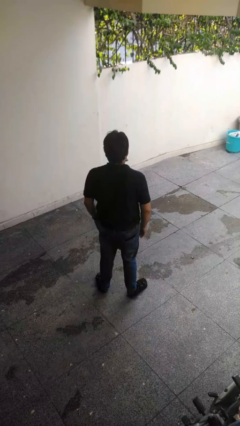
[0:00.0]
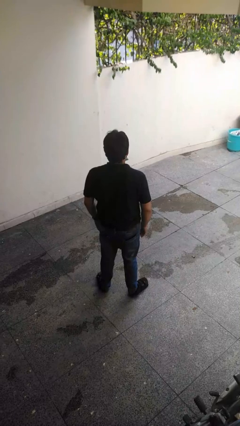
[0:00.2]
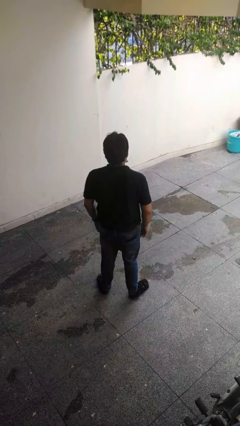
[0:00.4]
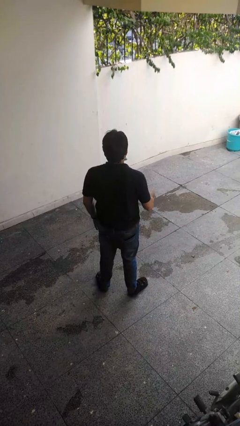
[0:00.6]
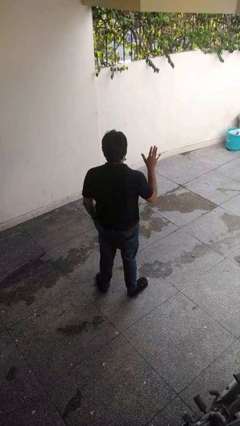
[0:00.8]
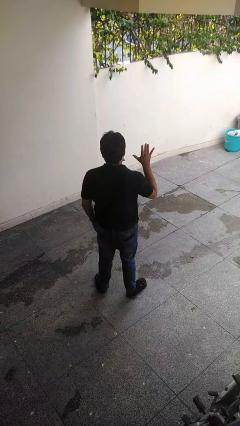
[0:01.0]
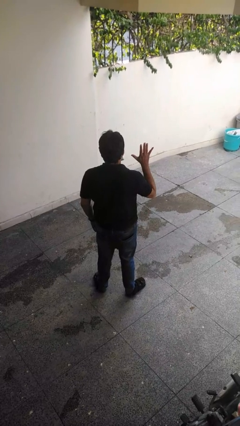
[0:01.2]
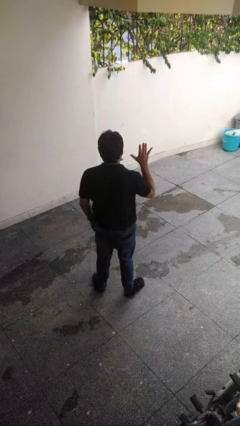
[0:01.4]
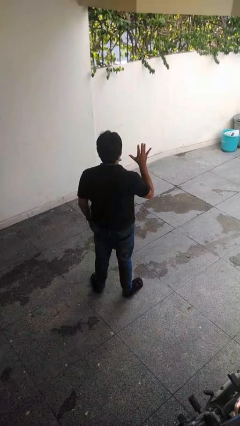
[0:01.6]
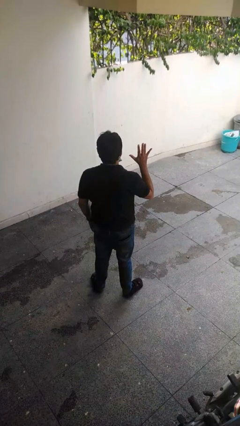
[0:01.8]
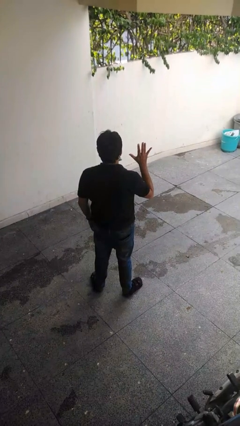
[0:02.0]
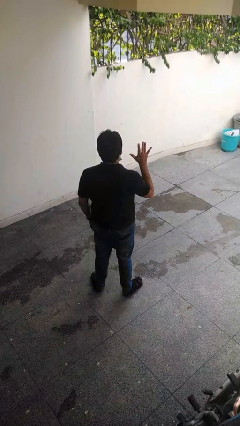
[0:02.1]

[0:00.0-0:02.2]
person gestures number five

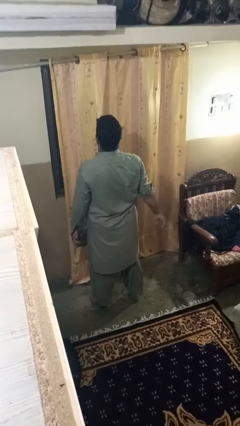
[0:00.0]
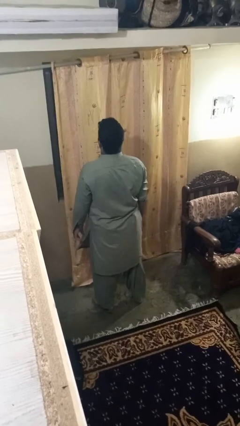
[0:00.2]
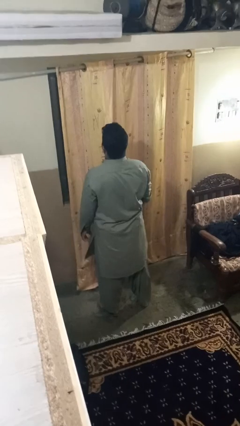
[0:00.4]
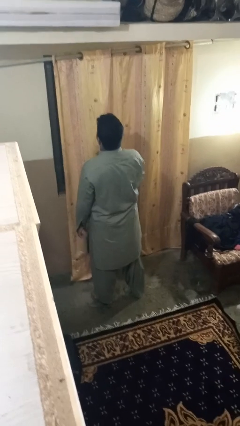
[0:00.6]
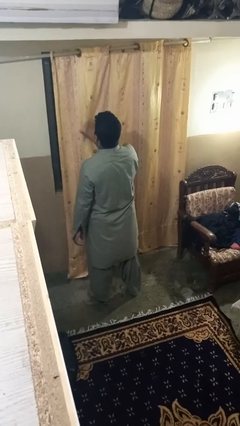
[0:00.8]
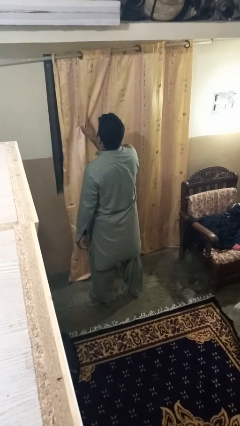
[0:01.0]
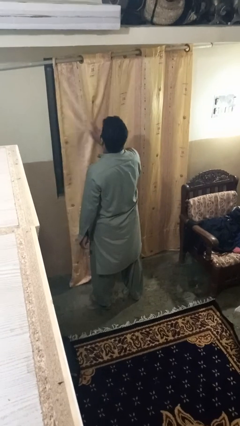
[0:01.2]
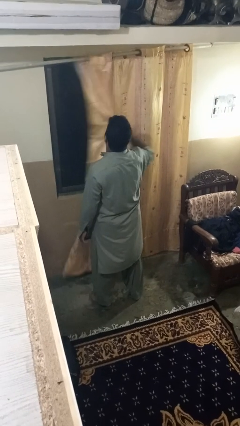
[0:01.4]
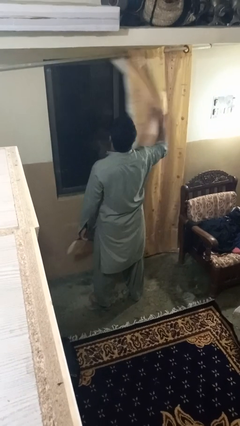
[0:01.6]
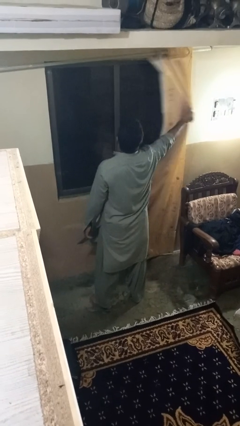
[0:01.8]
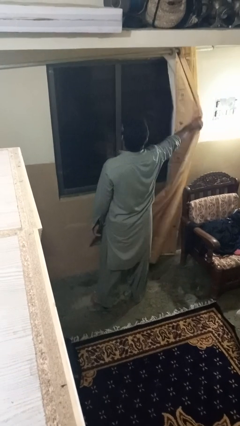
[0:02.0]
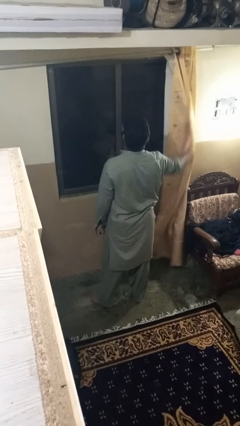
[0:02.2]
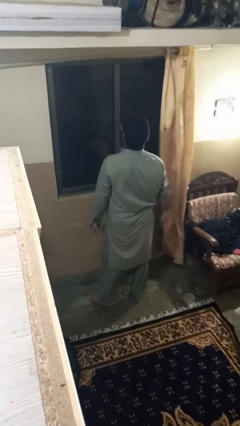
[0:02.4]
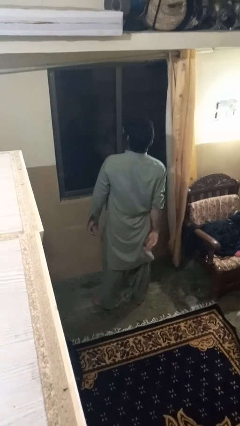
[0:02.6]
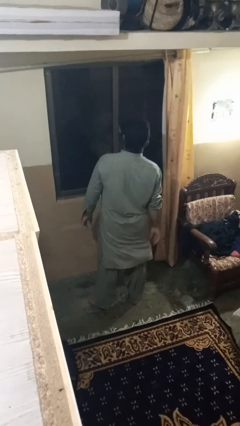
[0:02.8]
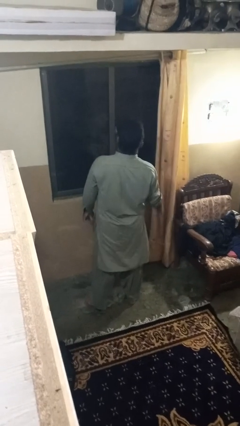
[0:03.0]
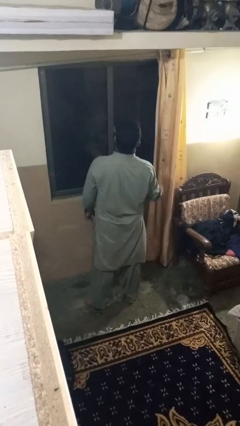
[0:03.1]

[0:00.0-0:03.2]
person opens curtains

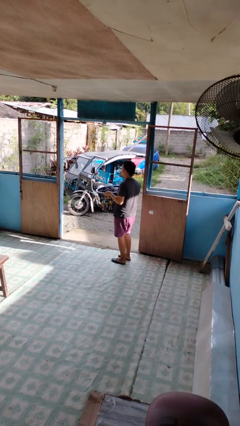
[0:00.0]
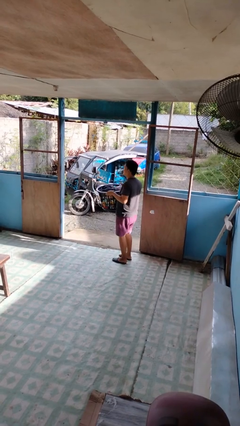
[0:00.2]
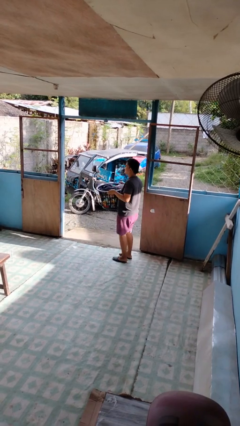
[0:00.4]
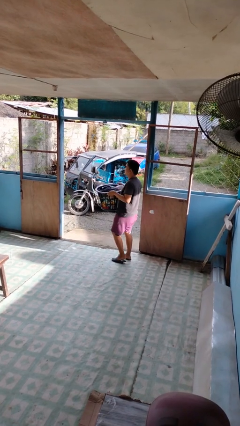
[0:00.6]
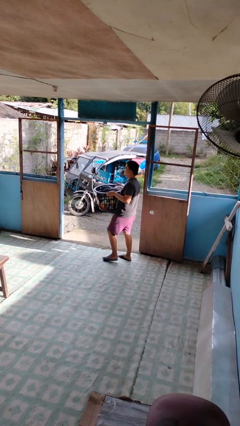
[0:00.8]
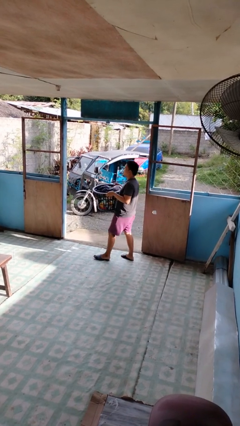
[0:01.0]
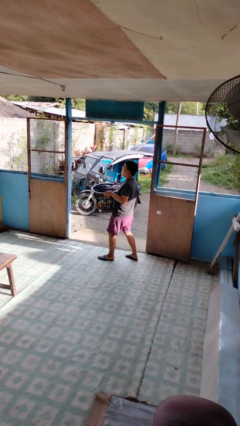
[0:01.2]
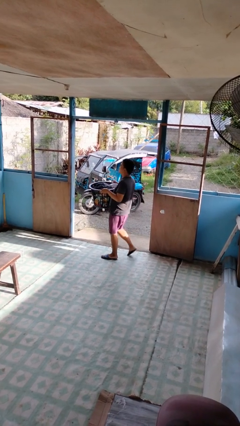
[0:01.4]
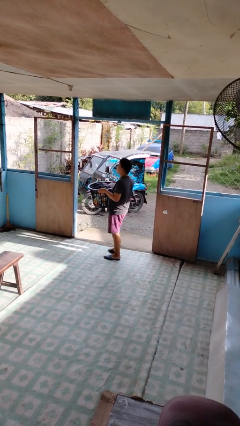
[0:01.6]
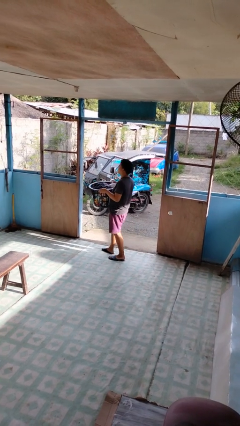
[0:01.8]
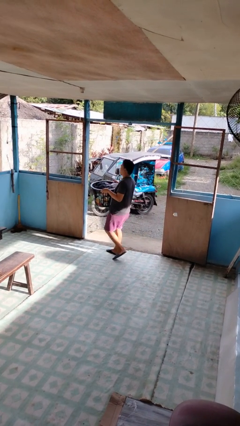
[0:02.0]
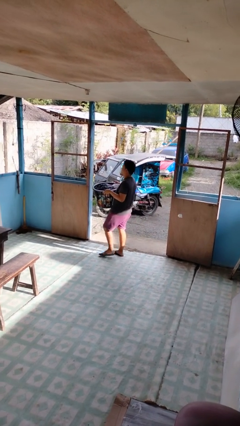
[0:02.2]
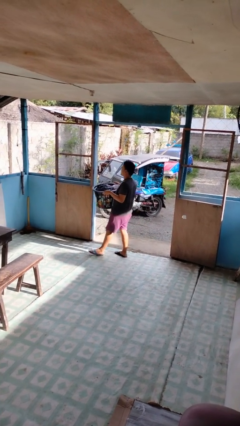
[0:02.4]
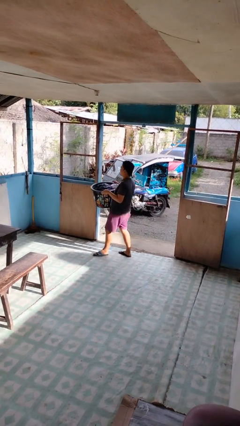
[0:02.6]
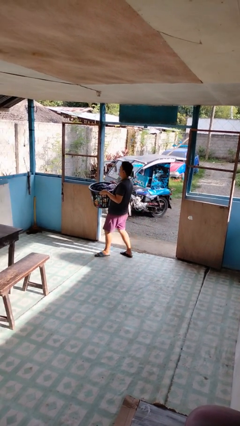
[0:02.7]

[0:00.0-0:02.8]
person carries laundry basket

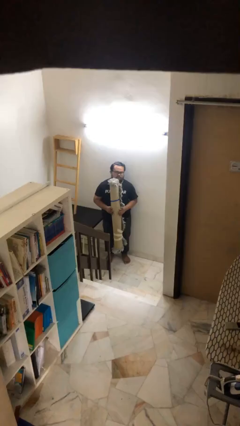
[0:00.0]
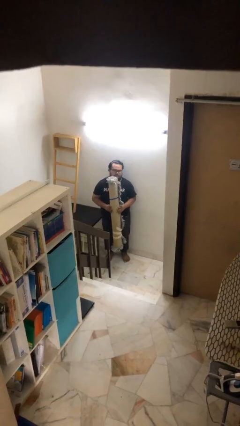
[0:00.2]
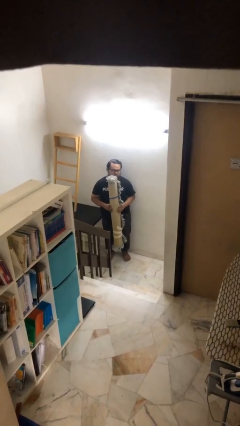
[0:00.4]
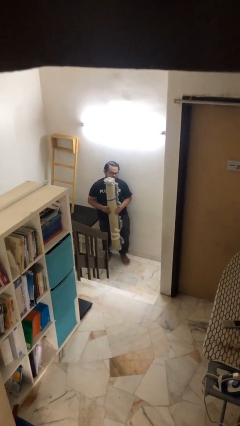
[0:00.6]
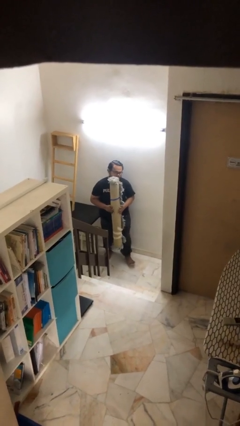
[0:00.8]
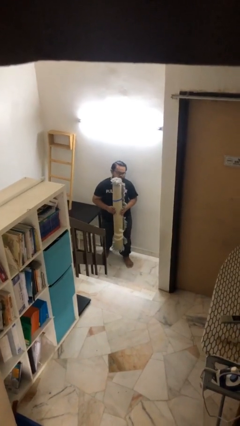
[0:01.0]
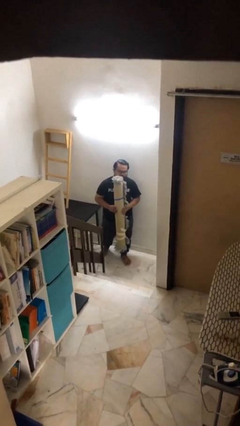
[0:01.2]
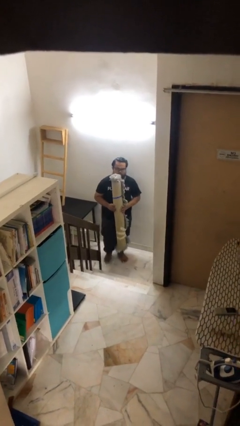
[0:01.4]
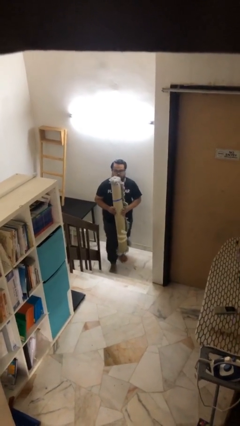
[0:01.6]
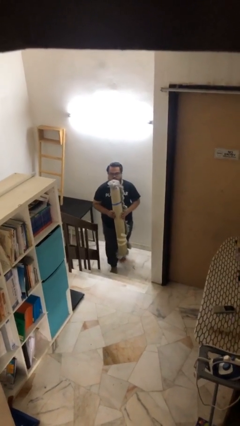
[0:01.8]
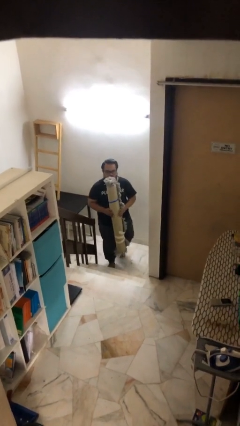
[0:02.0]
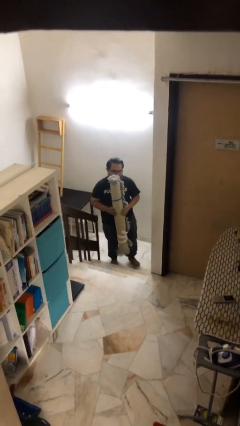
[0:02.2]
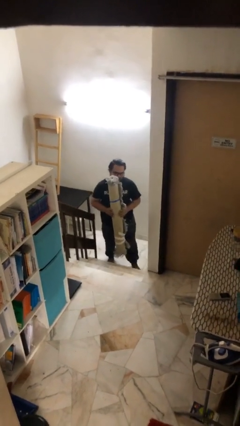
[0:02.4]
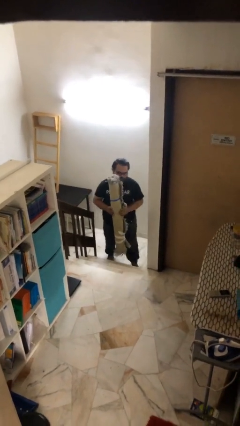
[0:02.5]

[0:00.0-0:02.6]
person carries heavy object

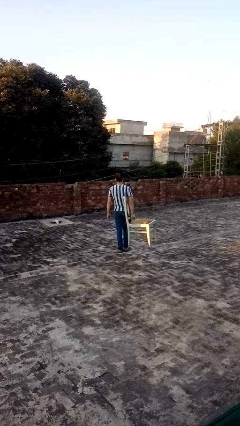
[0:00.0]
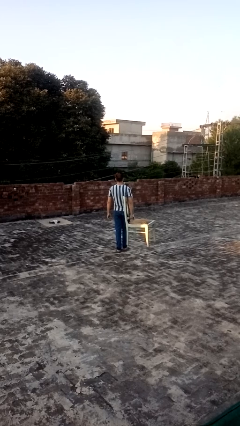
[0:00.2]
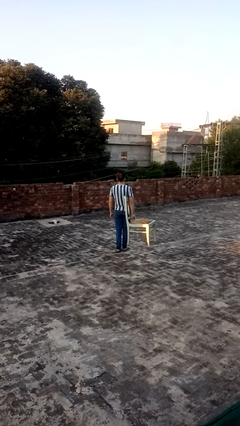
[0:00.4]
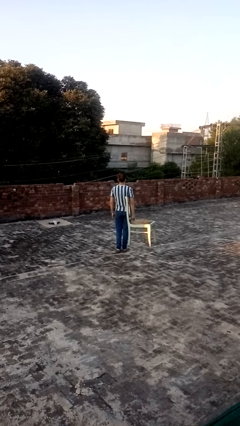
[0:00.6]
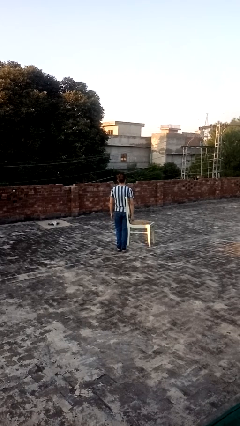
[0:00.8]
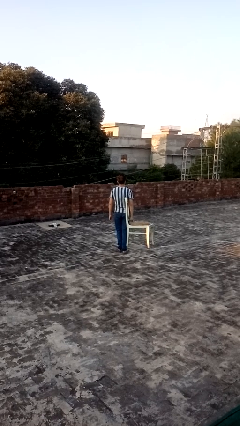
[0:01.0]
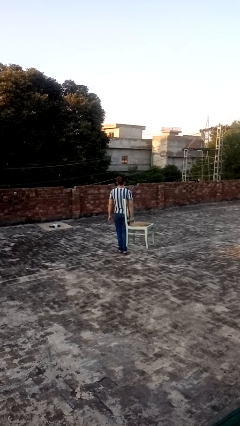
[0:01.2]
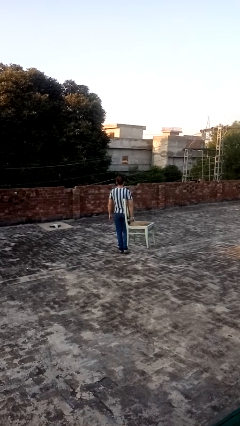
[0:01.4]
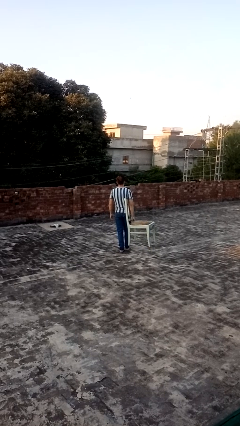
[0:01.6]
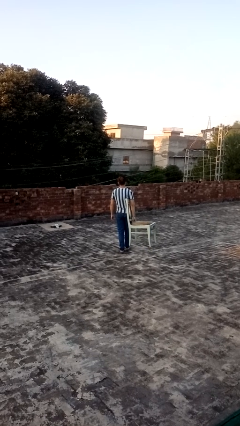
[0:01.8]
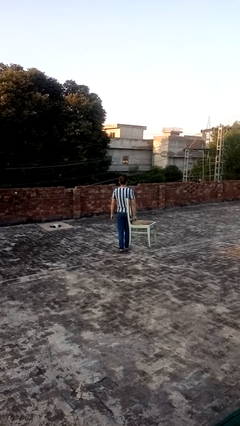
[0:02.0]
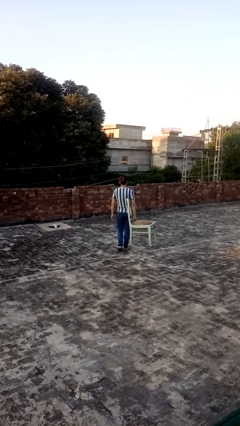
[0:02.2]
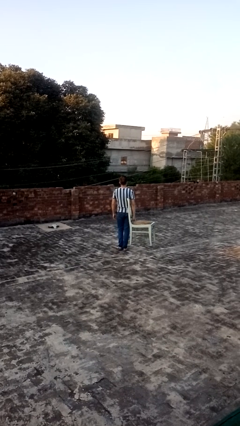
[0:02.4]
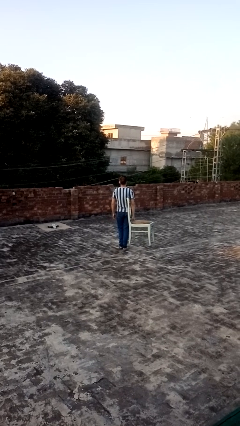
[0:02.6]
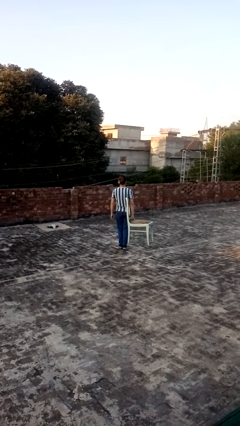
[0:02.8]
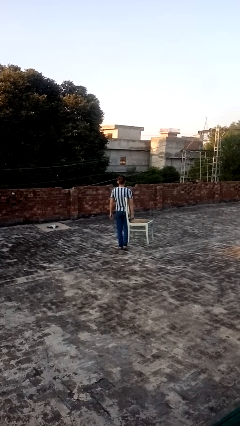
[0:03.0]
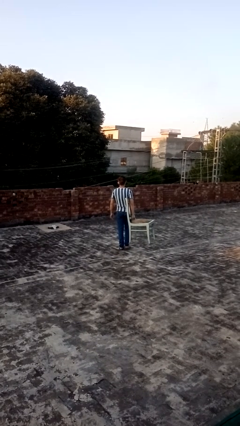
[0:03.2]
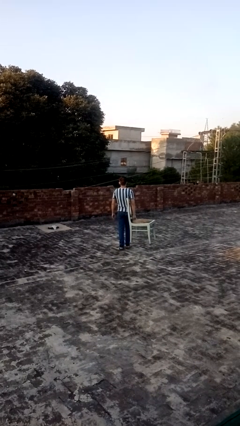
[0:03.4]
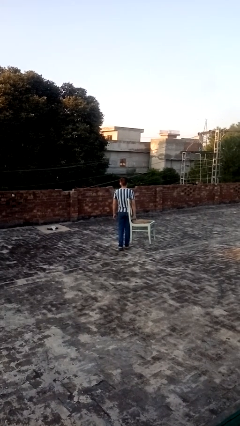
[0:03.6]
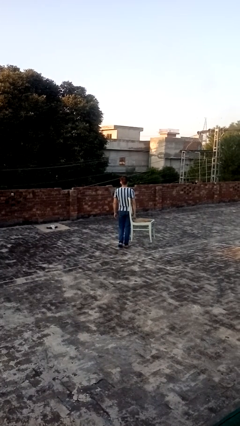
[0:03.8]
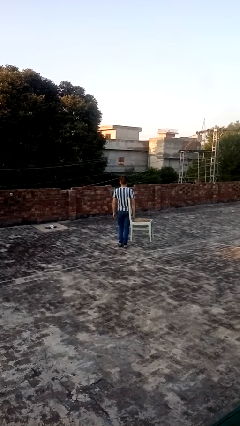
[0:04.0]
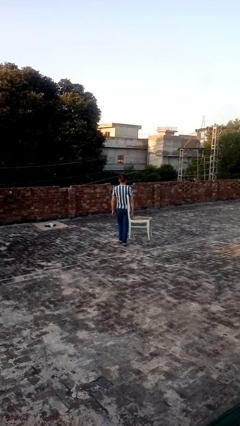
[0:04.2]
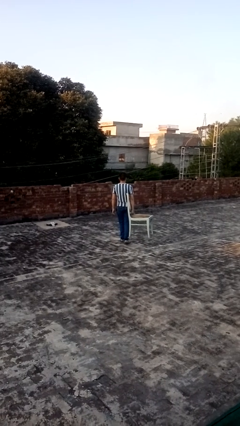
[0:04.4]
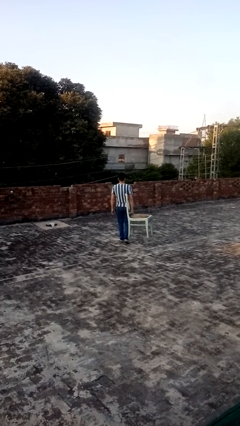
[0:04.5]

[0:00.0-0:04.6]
person carries furniture

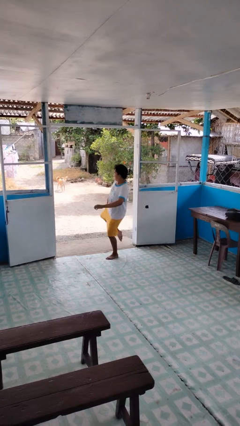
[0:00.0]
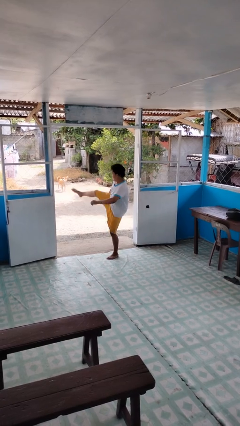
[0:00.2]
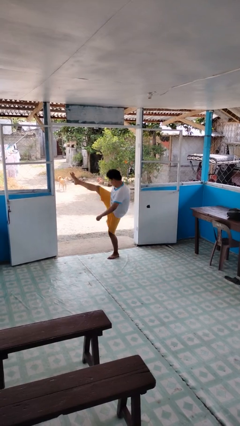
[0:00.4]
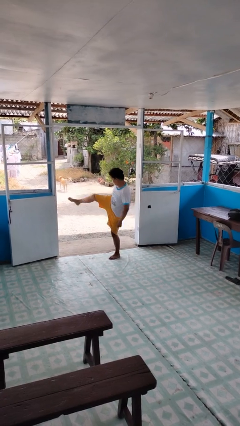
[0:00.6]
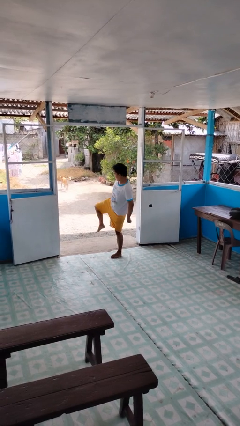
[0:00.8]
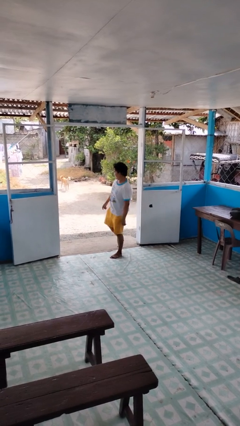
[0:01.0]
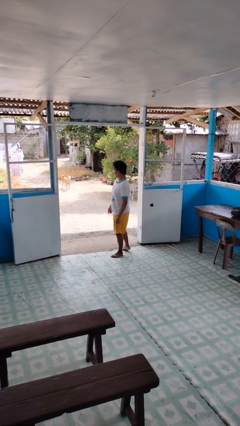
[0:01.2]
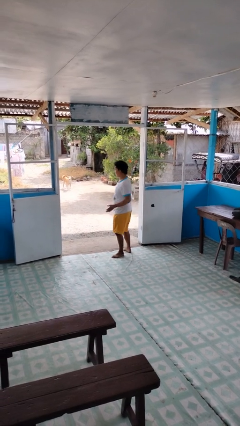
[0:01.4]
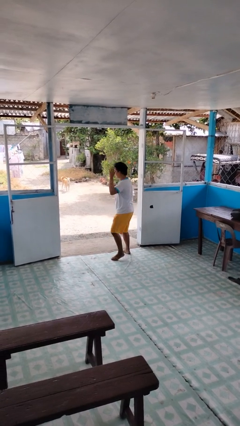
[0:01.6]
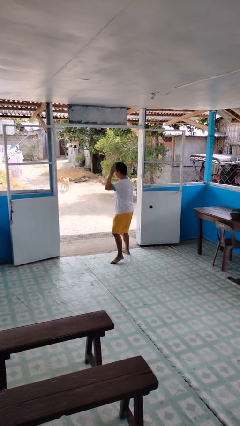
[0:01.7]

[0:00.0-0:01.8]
person karate kicks
